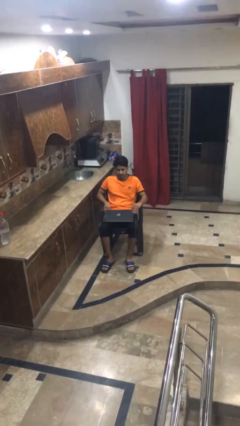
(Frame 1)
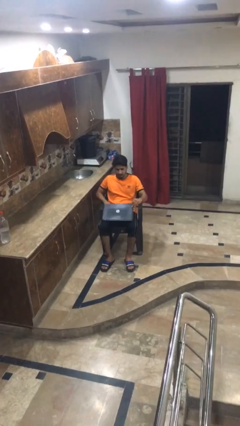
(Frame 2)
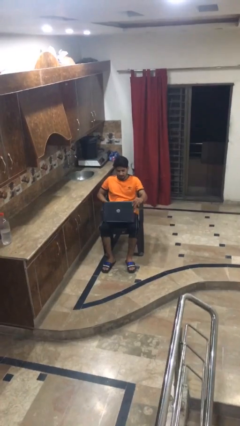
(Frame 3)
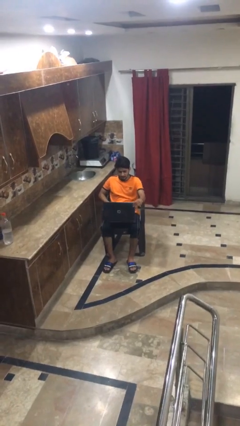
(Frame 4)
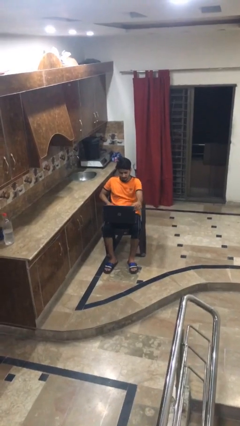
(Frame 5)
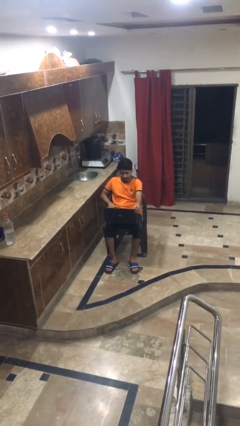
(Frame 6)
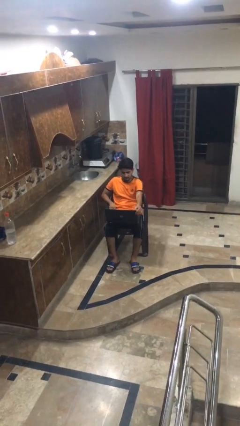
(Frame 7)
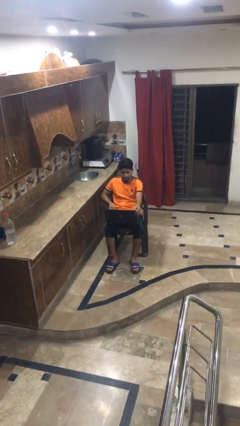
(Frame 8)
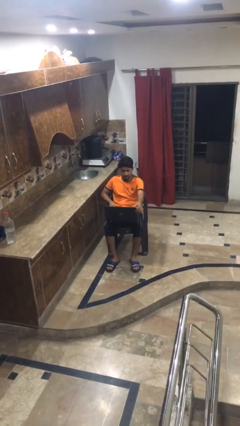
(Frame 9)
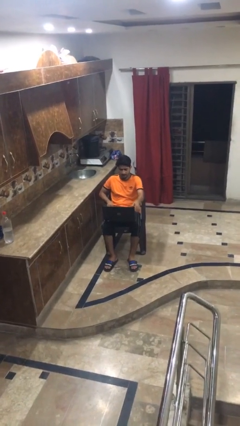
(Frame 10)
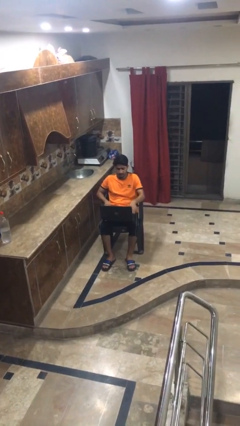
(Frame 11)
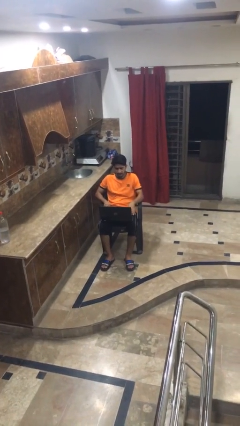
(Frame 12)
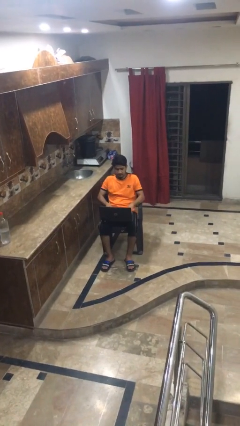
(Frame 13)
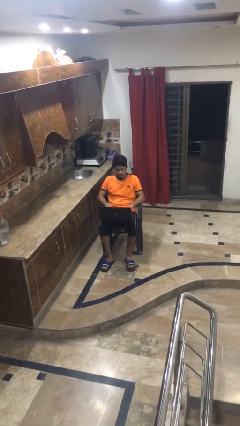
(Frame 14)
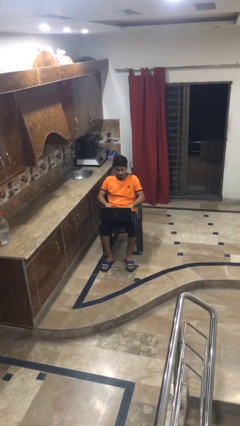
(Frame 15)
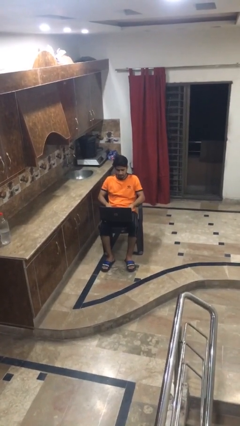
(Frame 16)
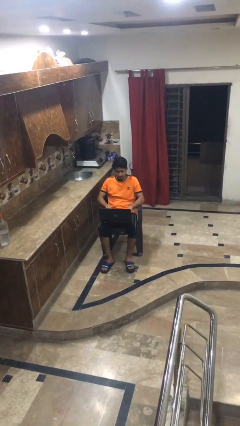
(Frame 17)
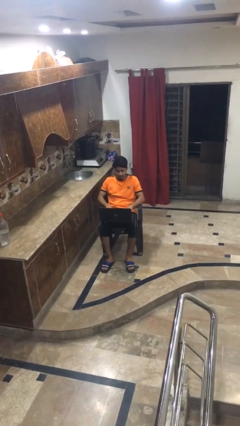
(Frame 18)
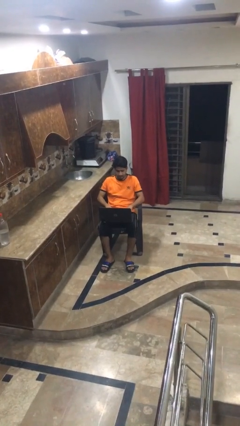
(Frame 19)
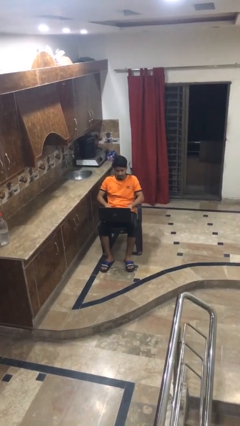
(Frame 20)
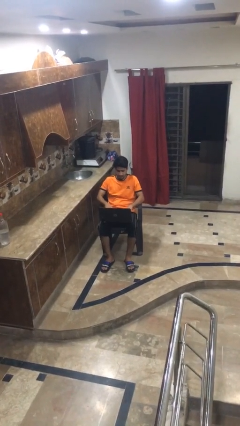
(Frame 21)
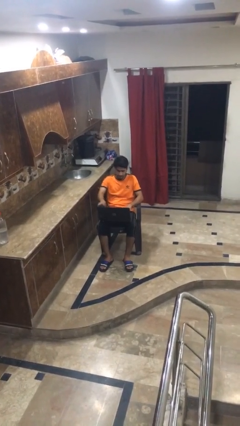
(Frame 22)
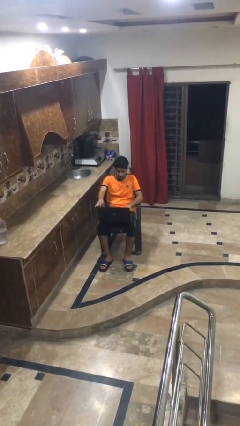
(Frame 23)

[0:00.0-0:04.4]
person opens laptop

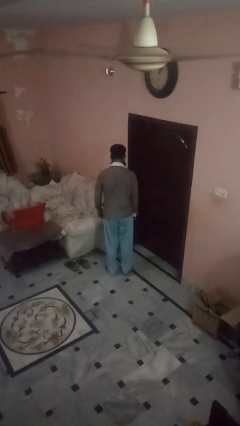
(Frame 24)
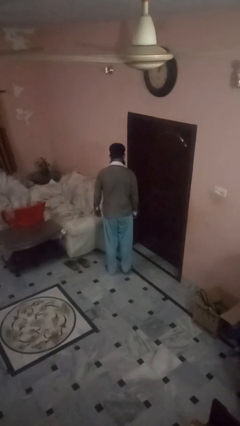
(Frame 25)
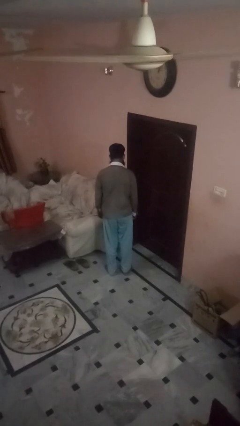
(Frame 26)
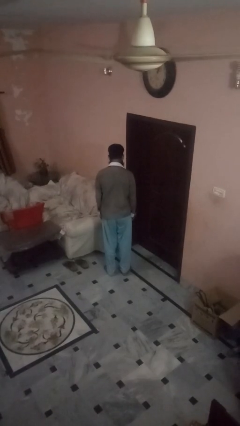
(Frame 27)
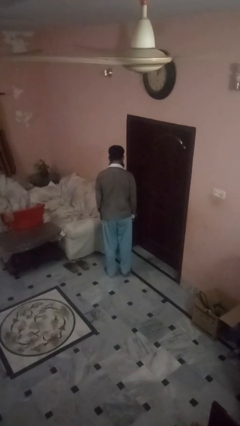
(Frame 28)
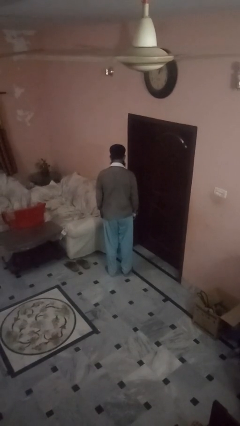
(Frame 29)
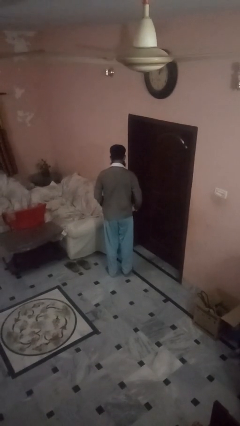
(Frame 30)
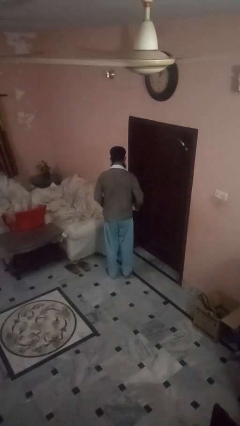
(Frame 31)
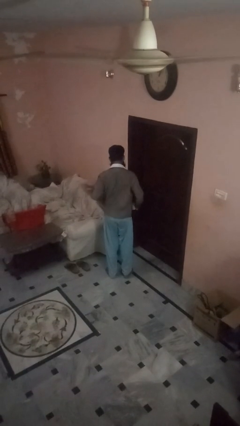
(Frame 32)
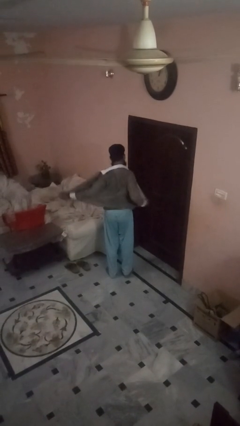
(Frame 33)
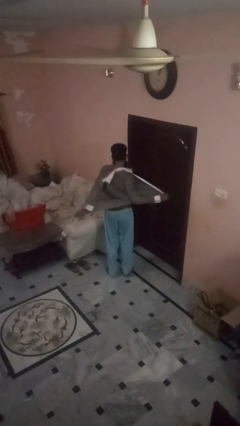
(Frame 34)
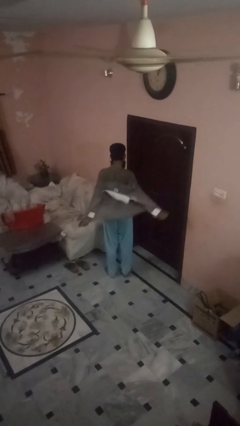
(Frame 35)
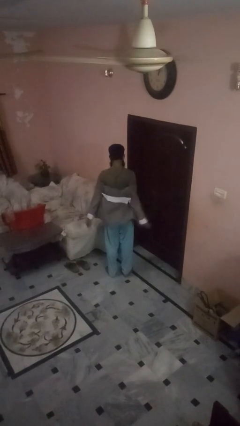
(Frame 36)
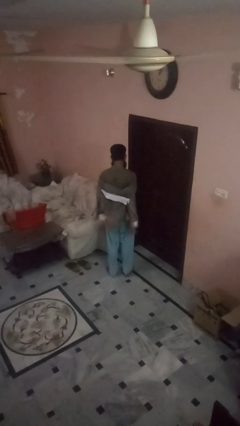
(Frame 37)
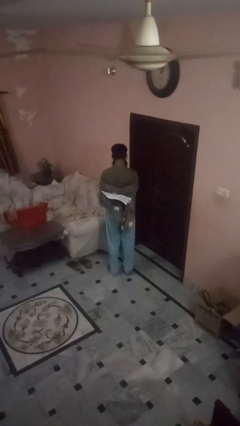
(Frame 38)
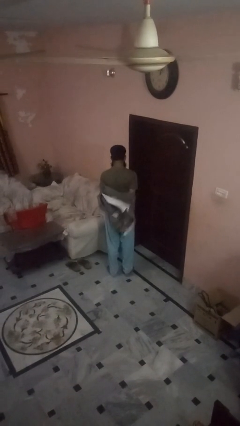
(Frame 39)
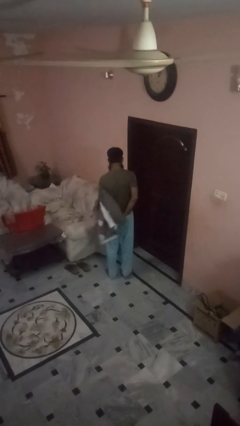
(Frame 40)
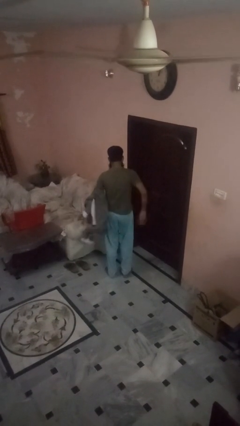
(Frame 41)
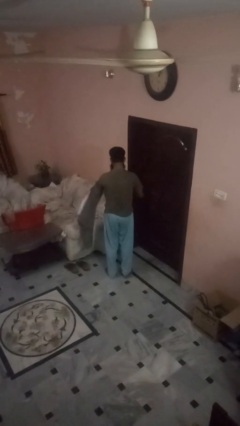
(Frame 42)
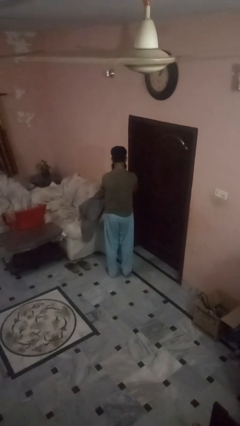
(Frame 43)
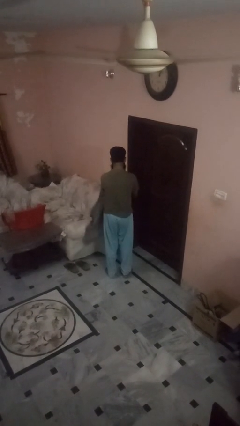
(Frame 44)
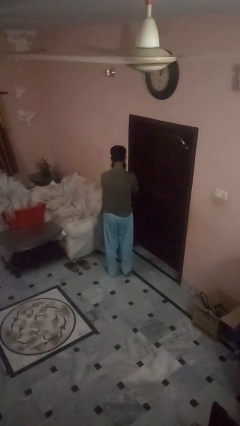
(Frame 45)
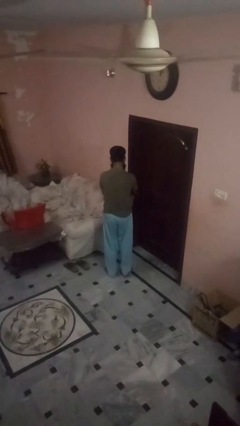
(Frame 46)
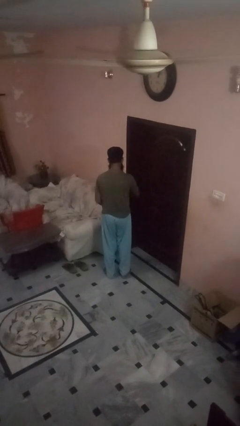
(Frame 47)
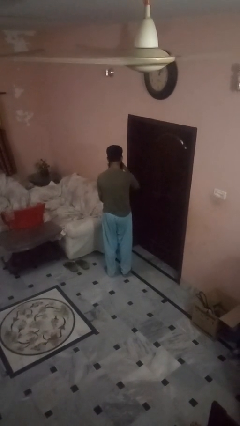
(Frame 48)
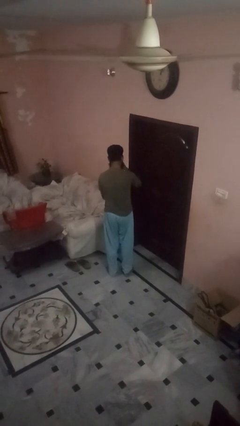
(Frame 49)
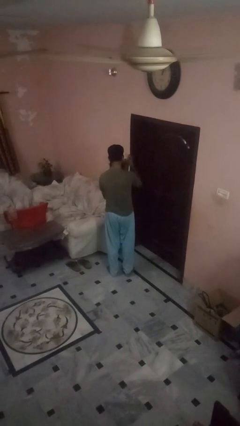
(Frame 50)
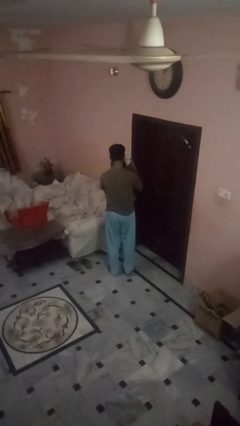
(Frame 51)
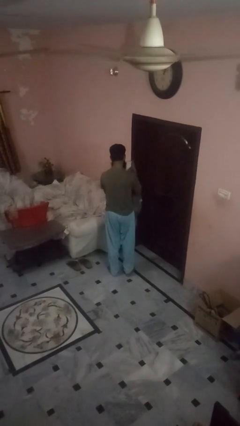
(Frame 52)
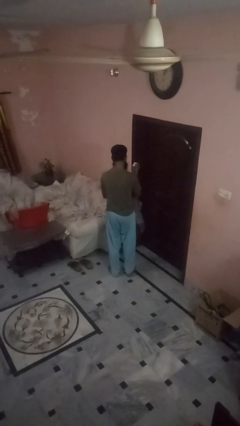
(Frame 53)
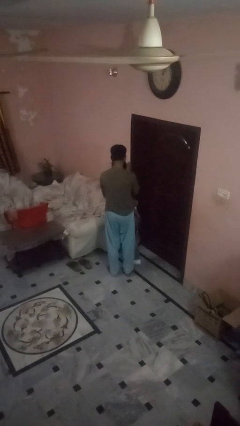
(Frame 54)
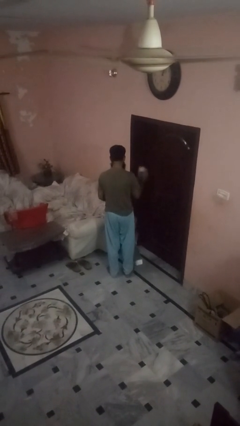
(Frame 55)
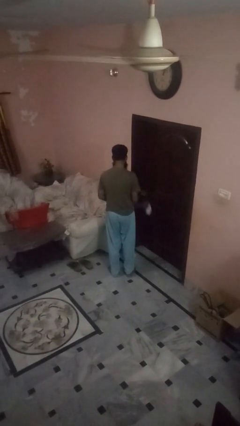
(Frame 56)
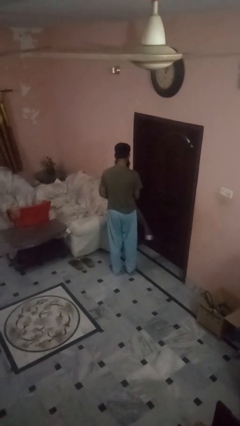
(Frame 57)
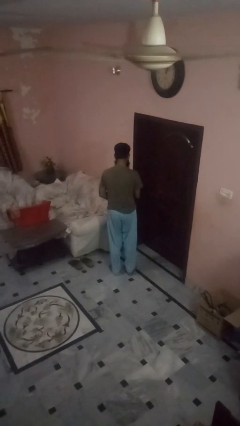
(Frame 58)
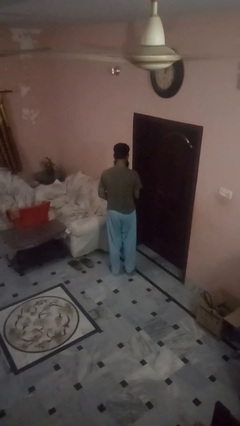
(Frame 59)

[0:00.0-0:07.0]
person takes off shirt

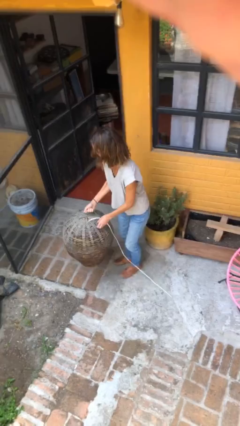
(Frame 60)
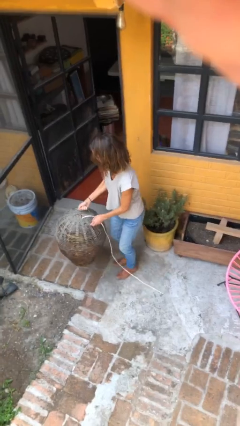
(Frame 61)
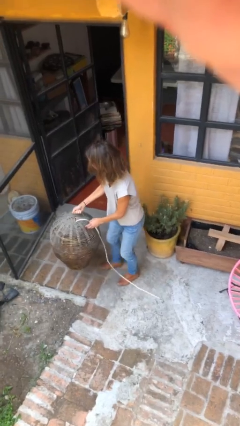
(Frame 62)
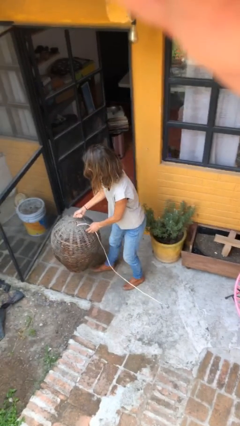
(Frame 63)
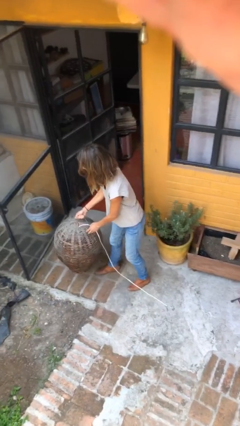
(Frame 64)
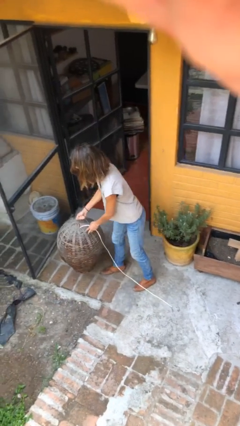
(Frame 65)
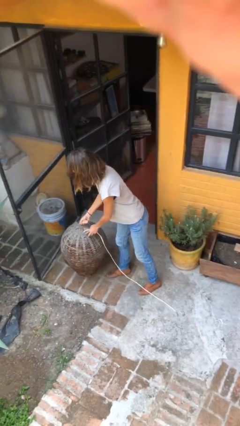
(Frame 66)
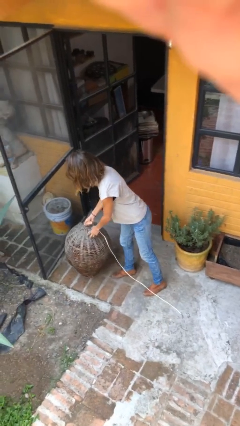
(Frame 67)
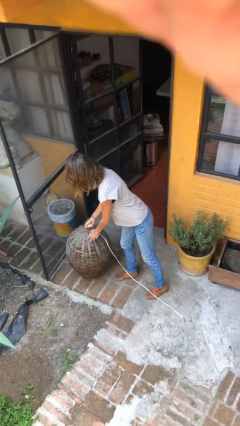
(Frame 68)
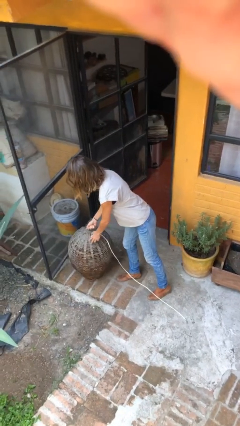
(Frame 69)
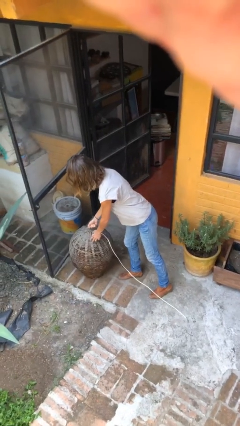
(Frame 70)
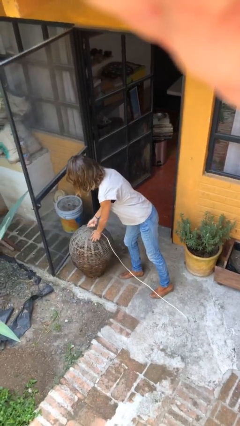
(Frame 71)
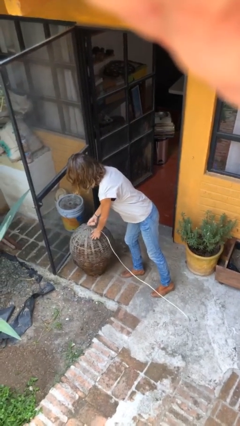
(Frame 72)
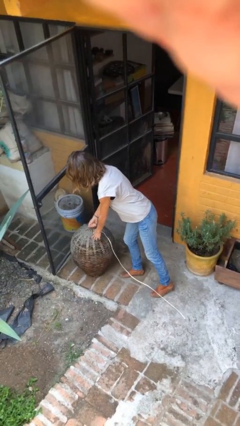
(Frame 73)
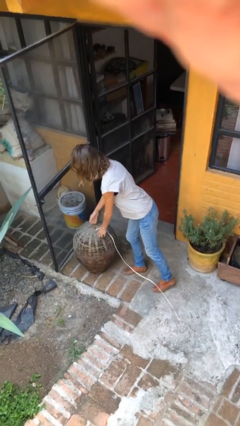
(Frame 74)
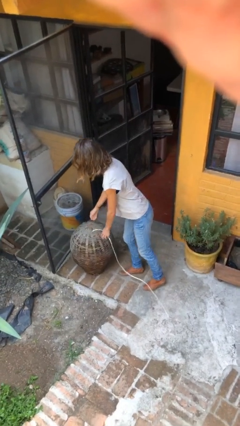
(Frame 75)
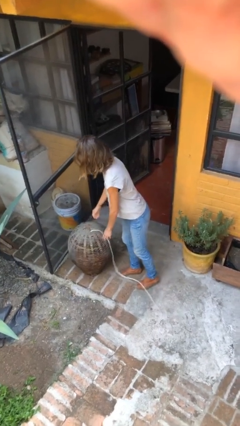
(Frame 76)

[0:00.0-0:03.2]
person puts down object on floor

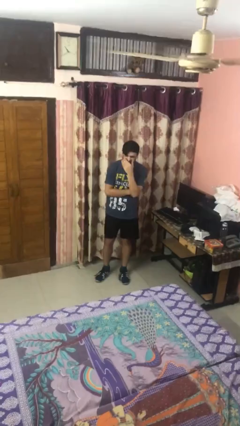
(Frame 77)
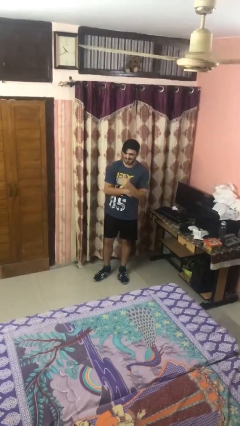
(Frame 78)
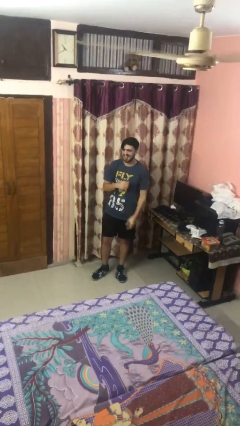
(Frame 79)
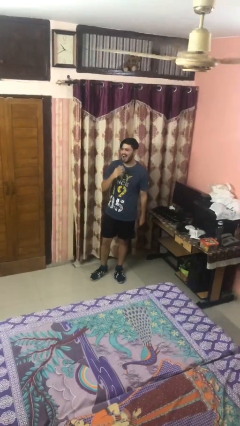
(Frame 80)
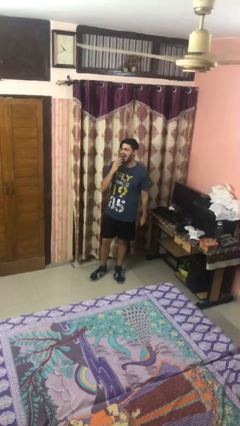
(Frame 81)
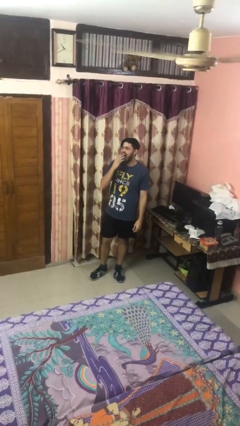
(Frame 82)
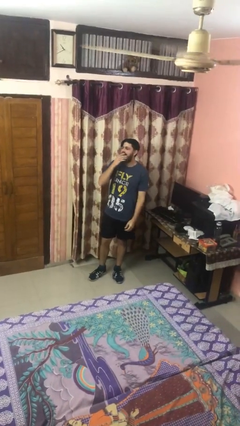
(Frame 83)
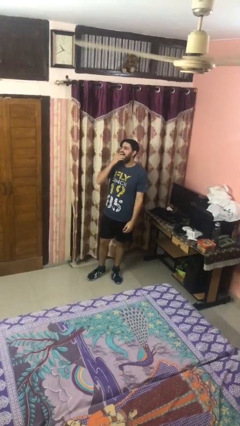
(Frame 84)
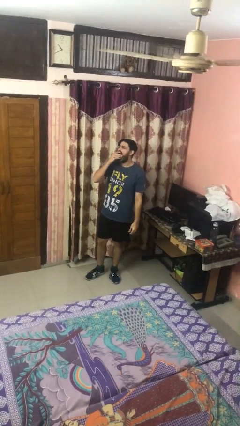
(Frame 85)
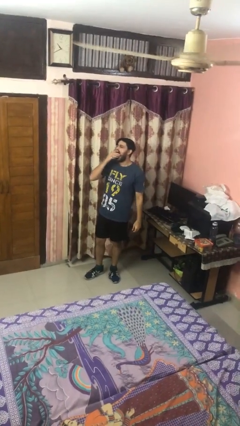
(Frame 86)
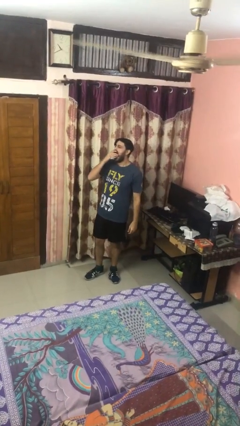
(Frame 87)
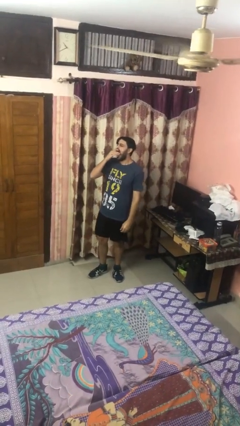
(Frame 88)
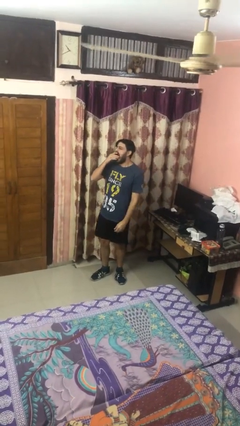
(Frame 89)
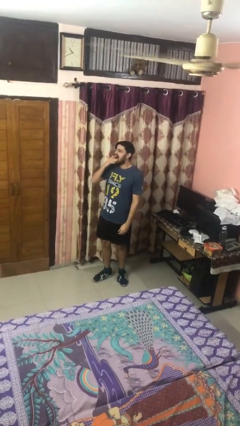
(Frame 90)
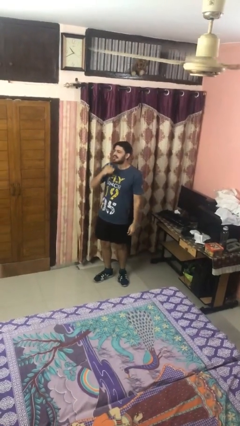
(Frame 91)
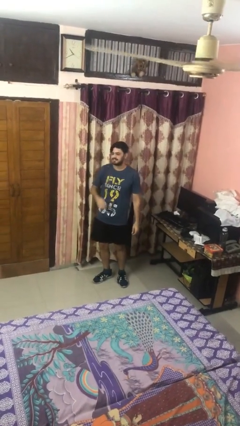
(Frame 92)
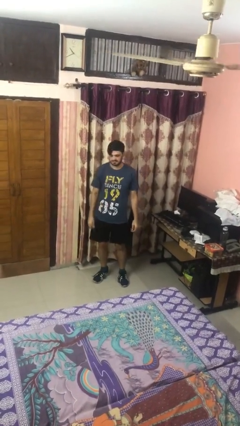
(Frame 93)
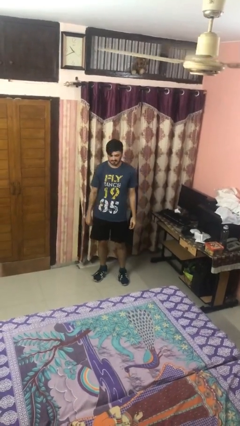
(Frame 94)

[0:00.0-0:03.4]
person yawns
